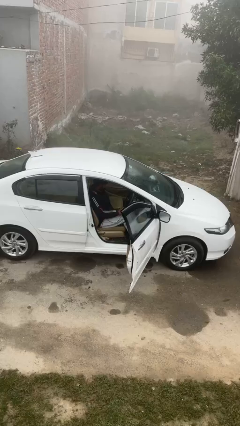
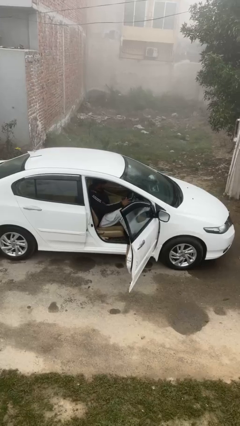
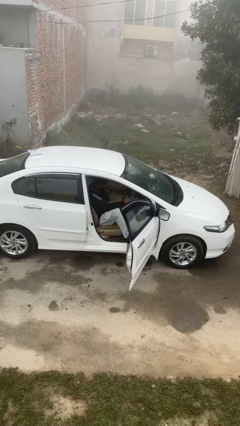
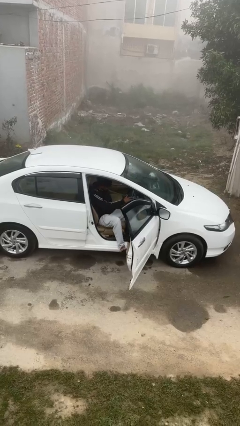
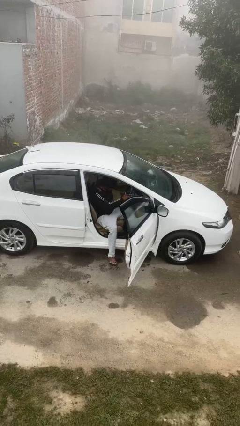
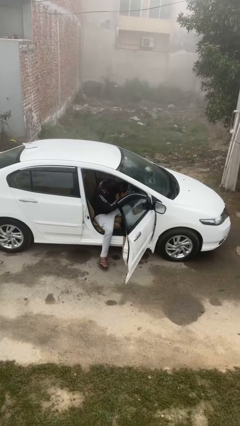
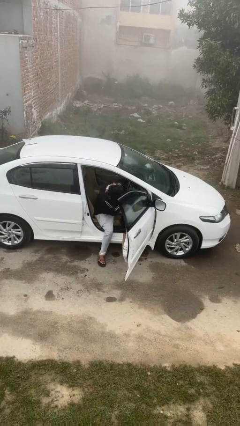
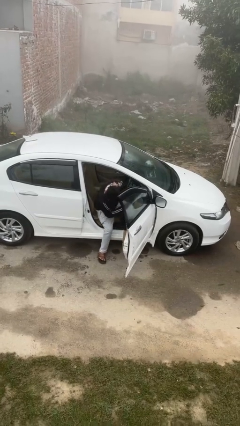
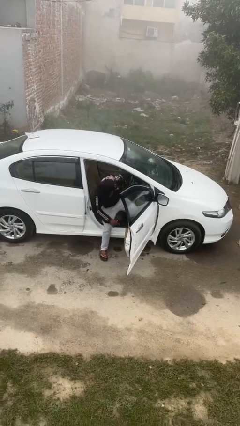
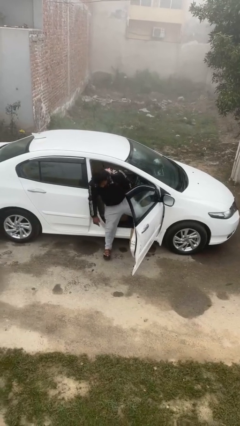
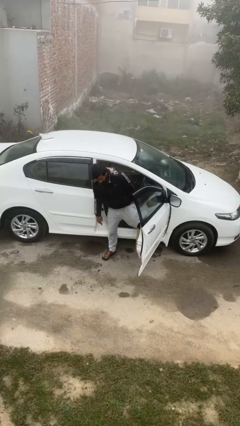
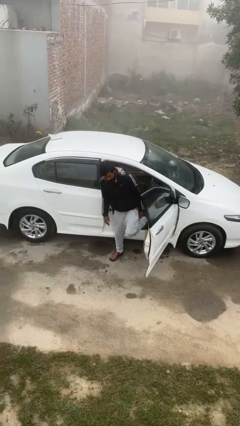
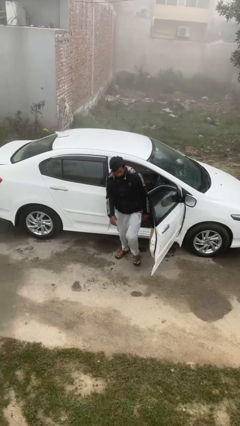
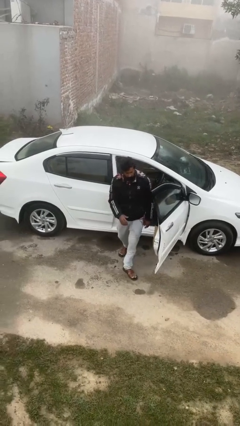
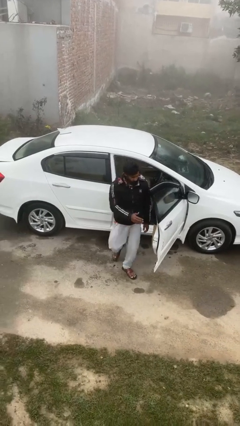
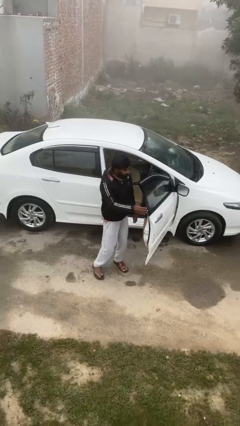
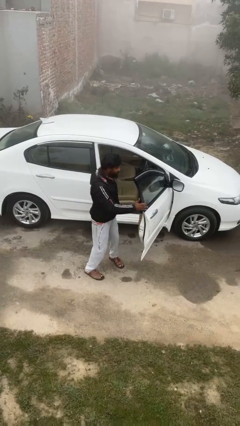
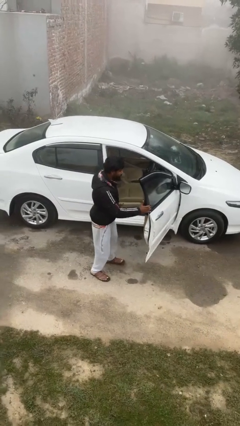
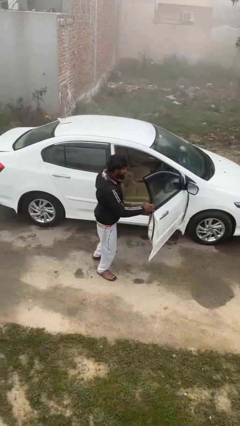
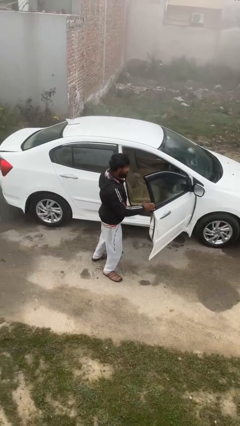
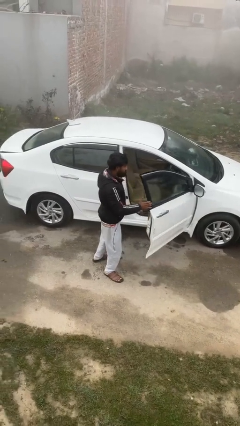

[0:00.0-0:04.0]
person exits car

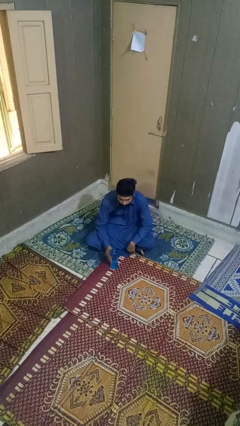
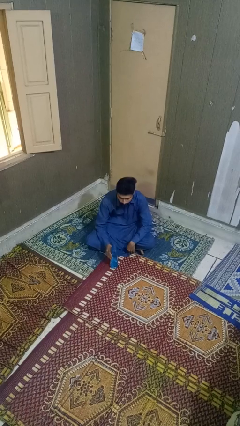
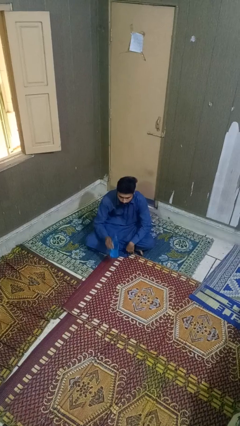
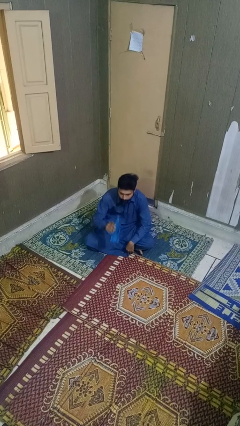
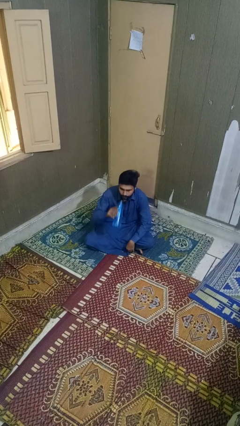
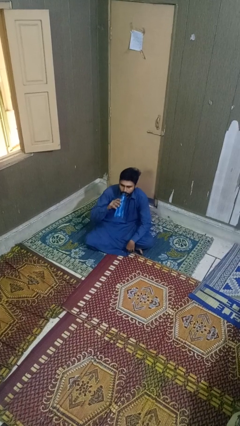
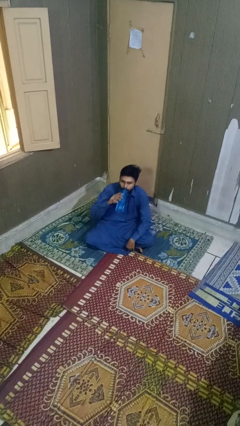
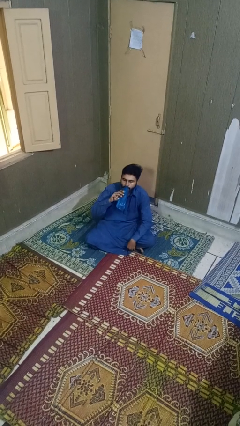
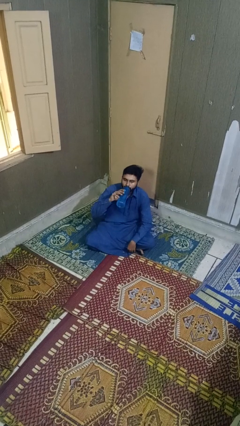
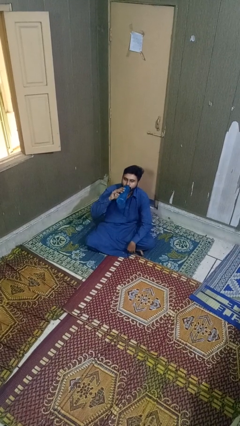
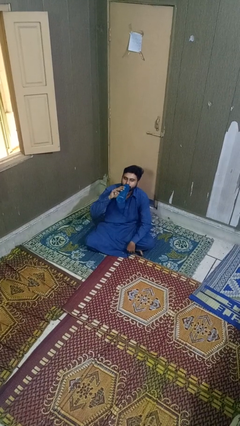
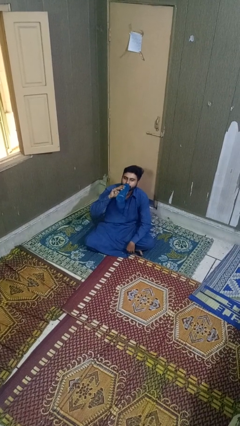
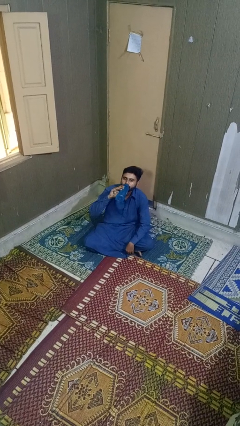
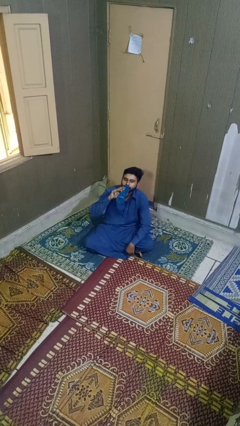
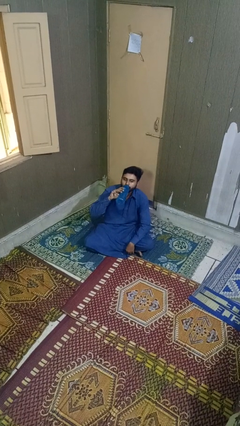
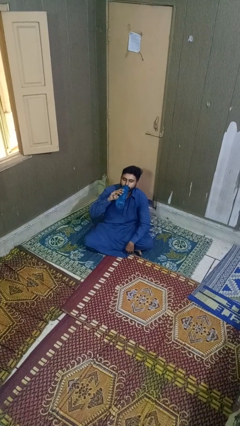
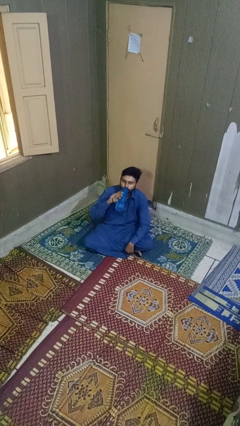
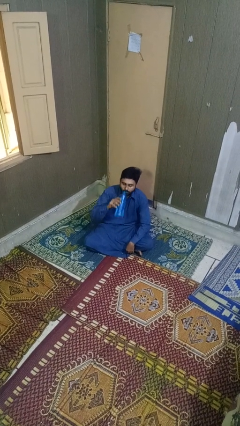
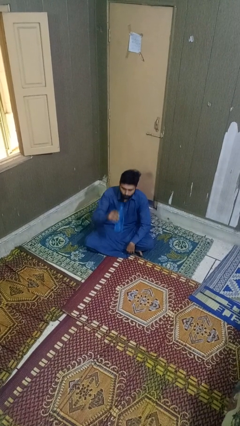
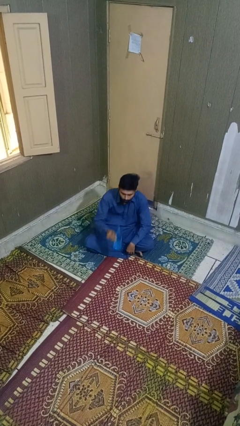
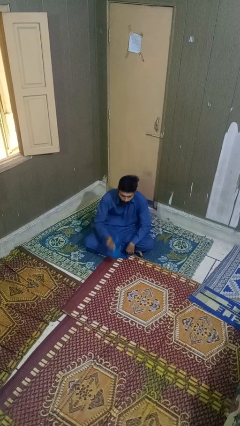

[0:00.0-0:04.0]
person drinks from bottle

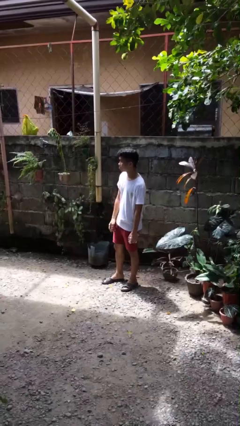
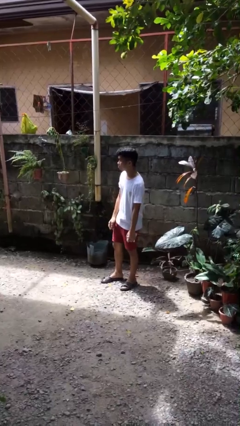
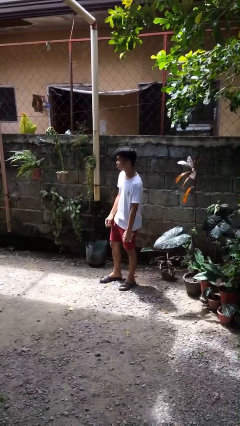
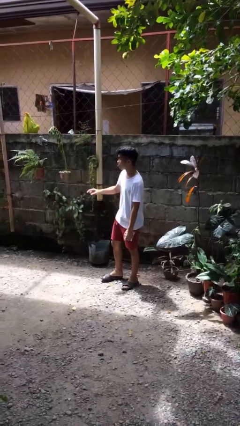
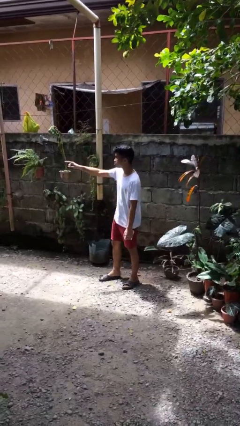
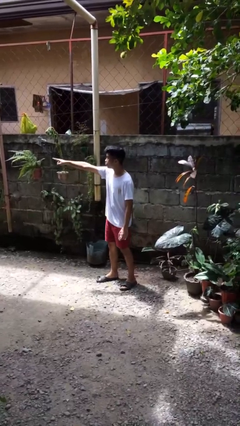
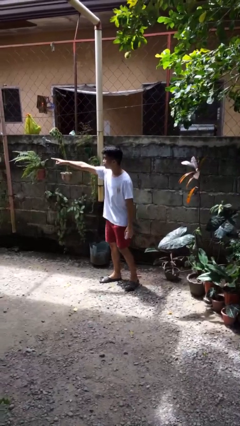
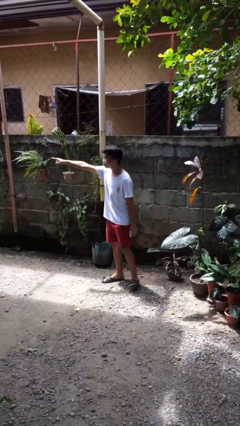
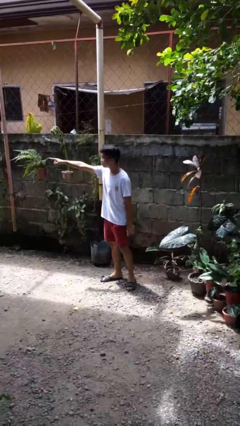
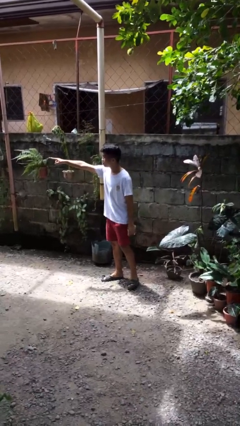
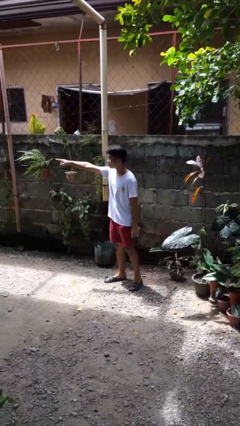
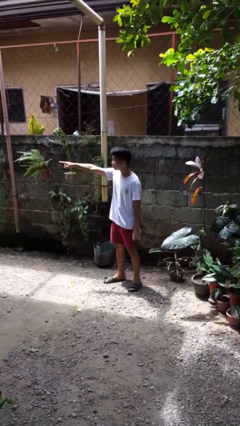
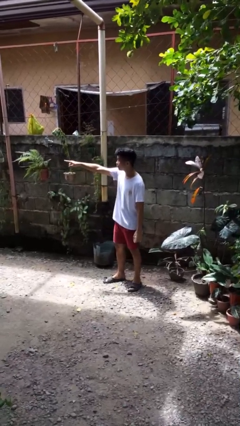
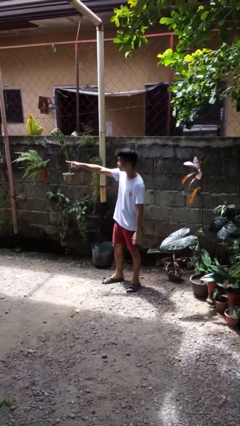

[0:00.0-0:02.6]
person points at person

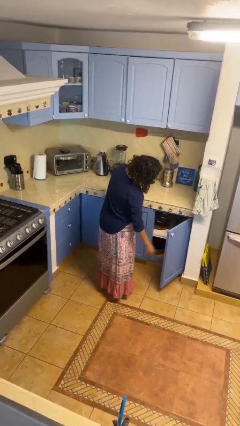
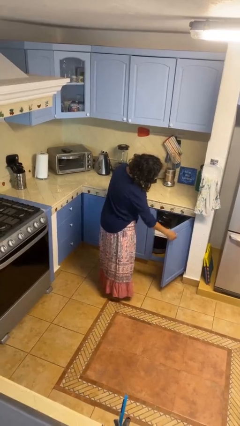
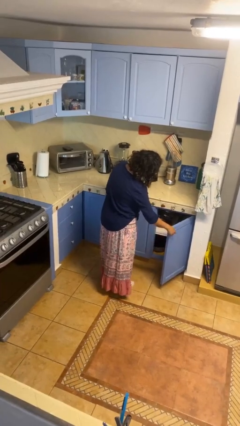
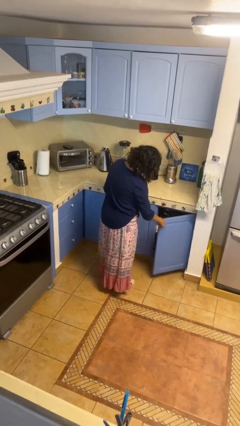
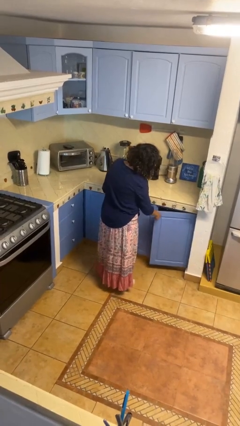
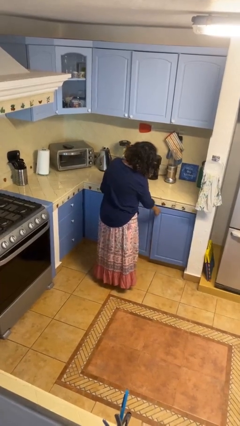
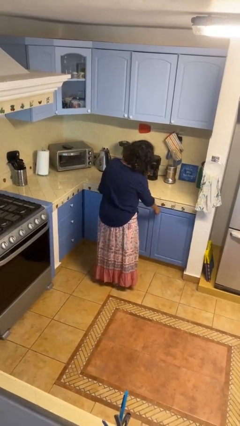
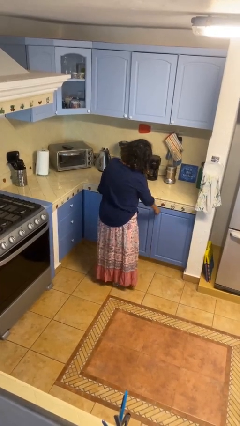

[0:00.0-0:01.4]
person closes cabinet

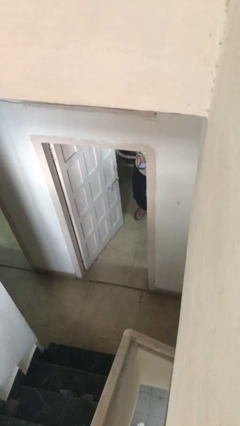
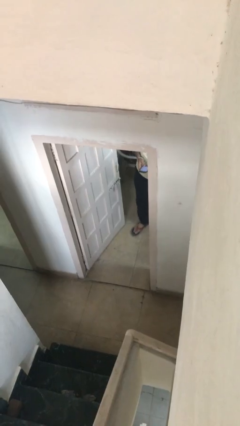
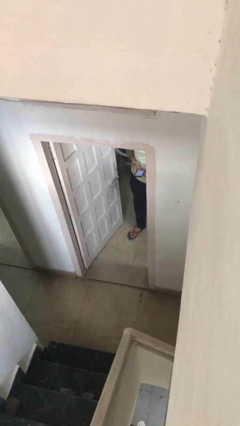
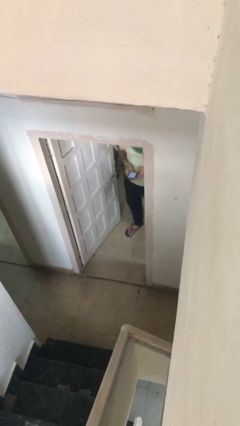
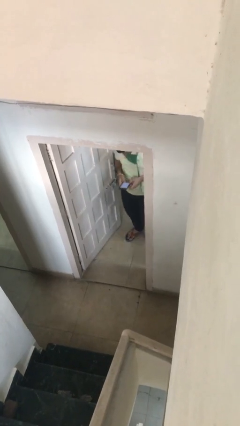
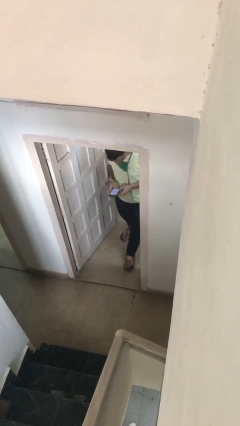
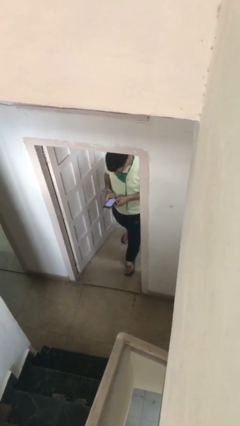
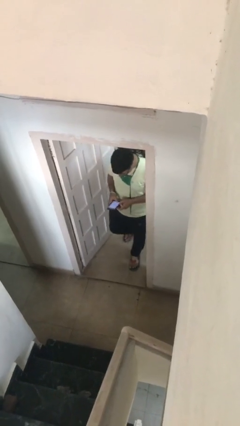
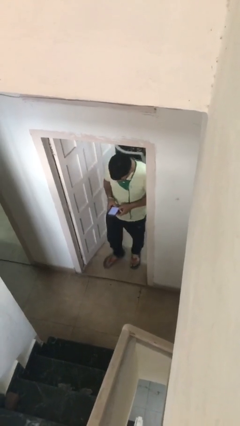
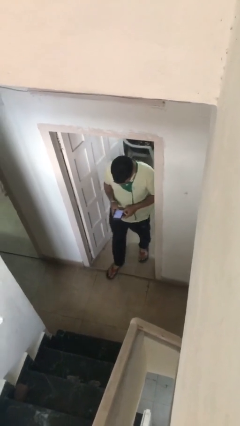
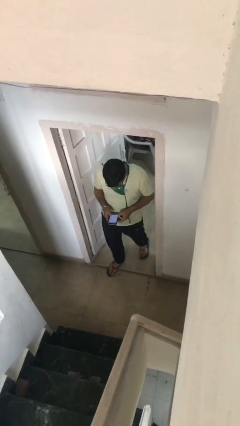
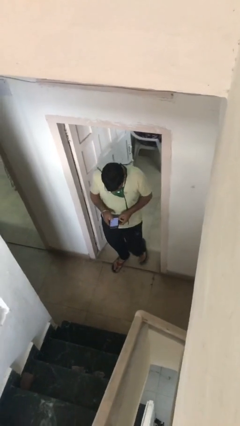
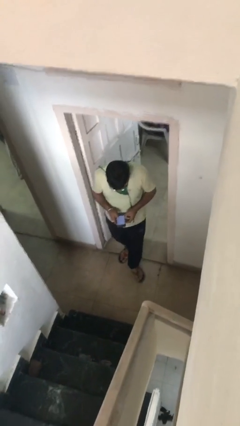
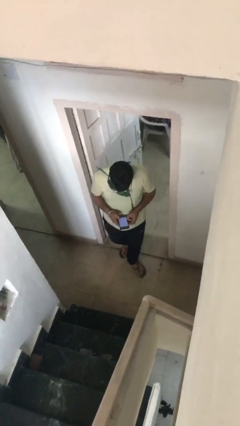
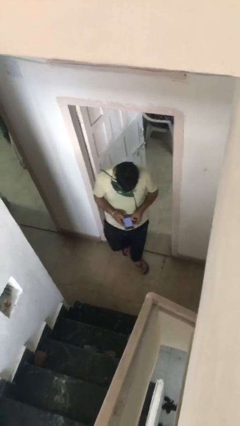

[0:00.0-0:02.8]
person enters scene through structure

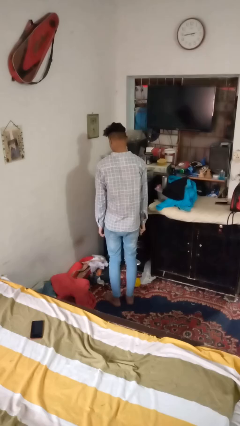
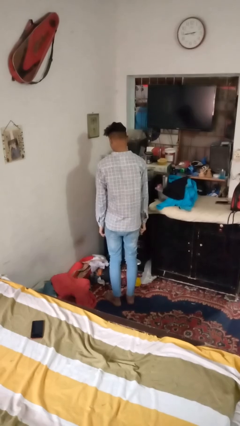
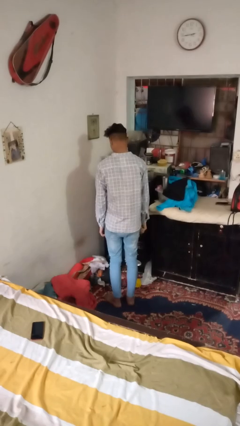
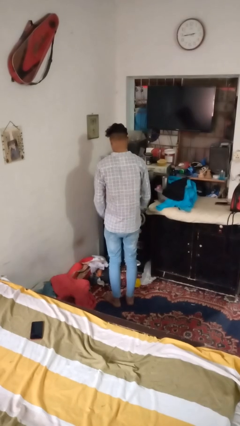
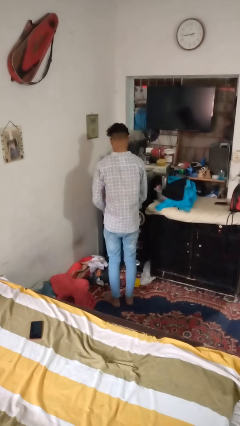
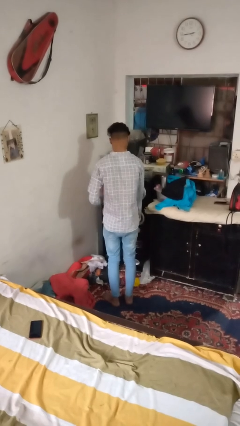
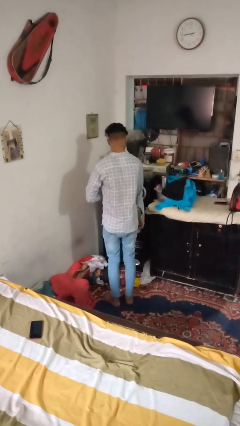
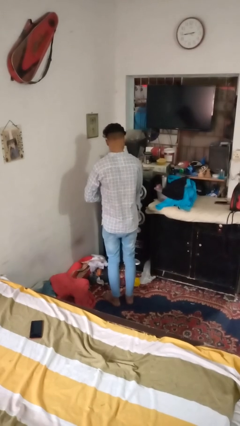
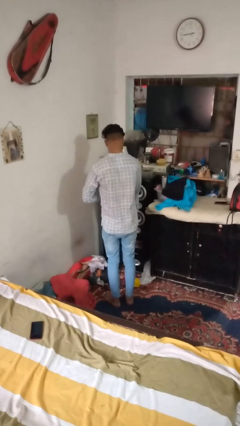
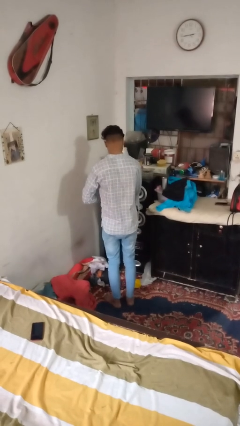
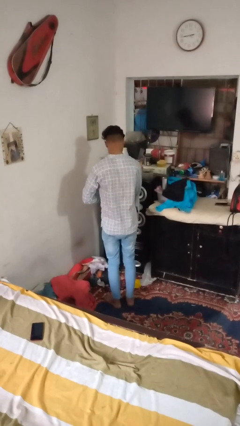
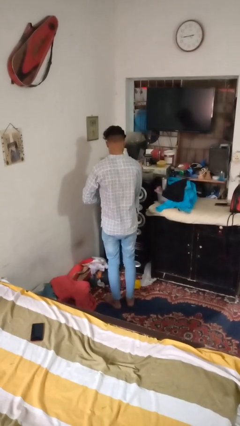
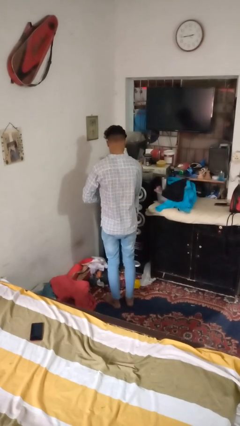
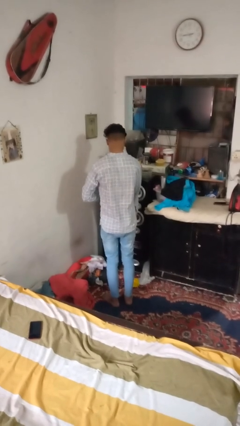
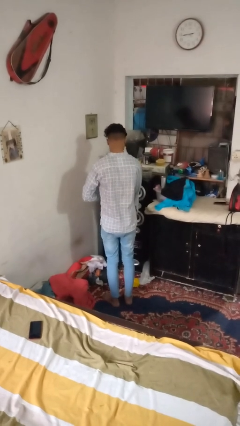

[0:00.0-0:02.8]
person swats bug

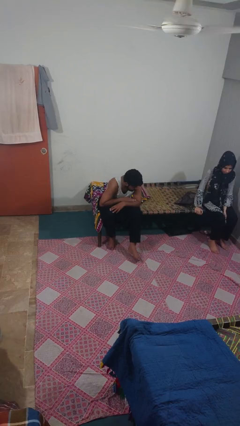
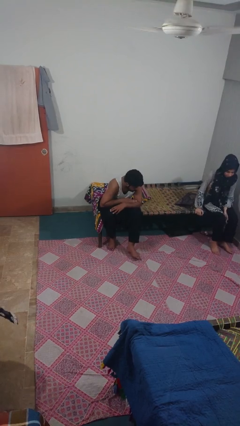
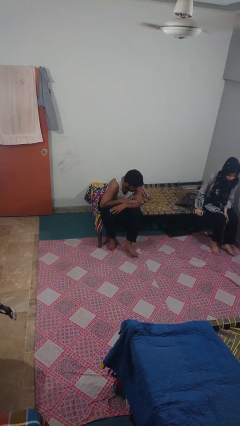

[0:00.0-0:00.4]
person kicks object to person
